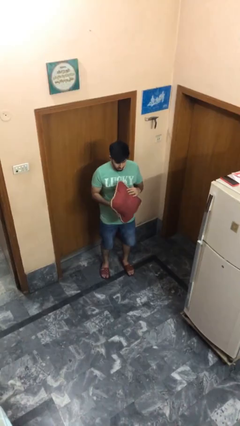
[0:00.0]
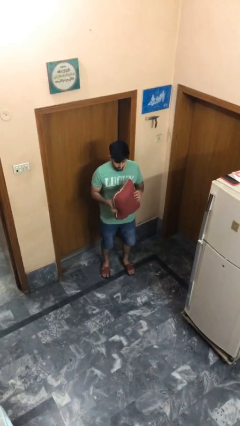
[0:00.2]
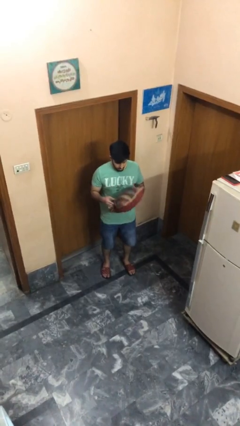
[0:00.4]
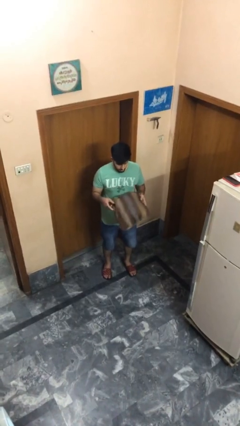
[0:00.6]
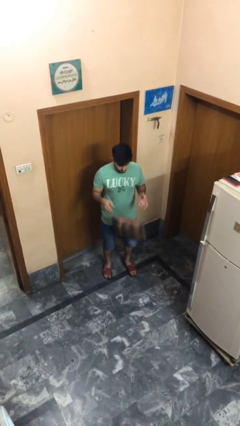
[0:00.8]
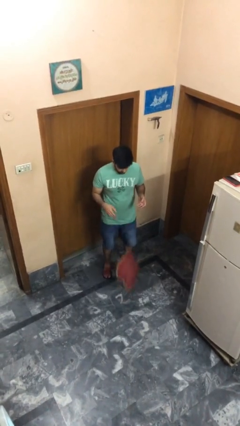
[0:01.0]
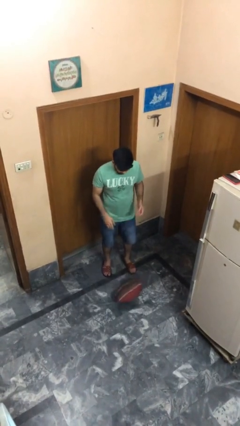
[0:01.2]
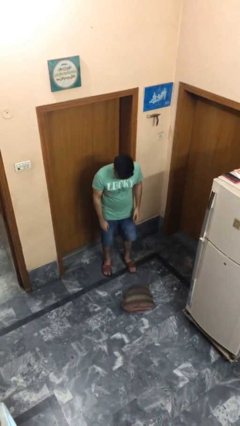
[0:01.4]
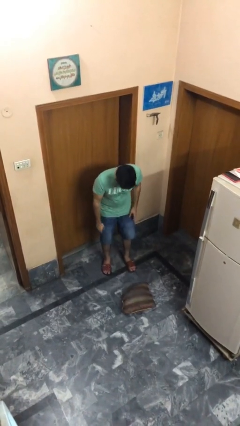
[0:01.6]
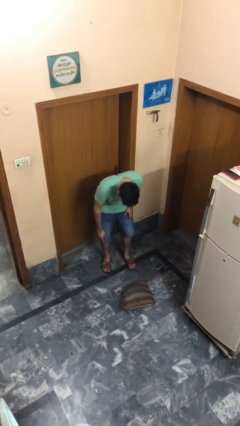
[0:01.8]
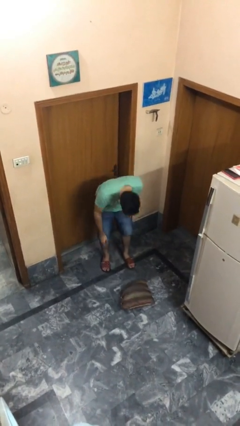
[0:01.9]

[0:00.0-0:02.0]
person drops object

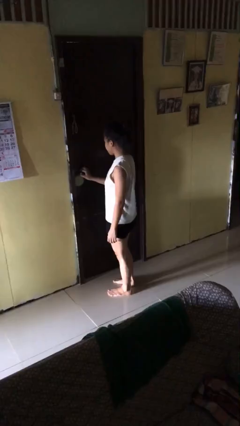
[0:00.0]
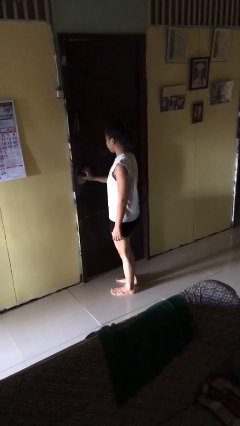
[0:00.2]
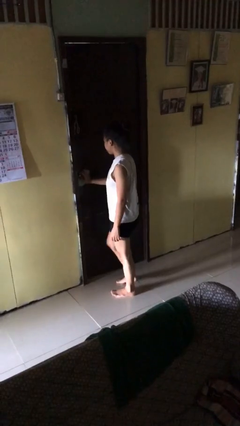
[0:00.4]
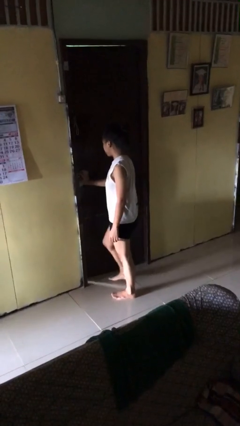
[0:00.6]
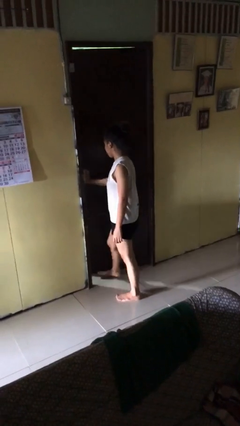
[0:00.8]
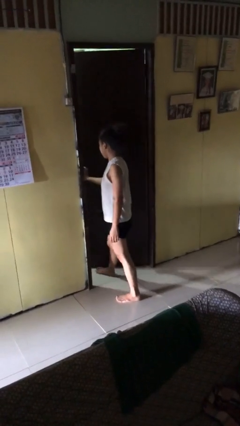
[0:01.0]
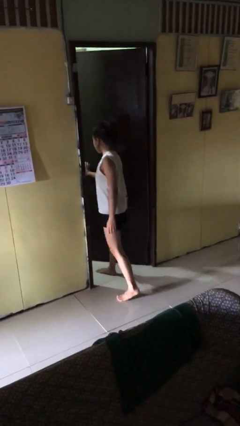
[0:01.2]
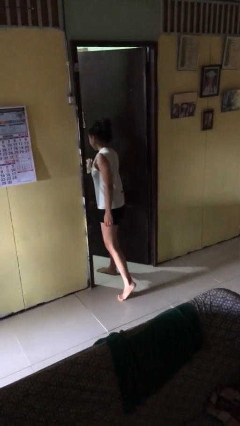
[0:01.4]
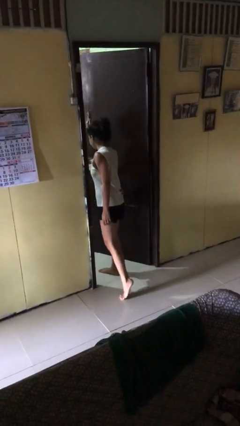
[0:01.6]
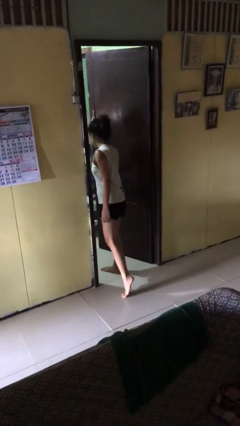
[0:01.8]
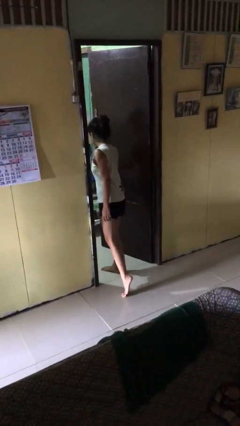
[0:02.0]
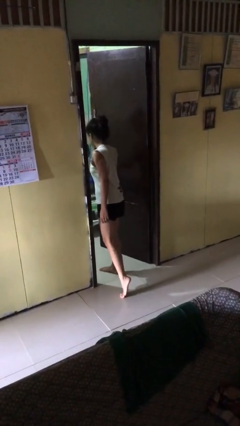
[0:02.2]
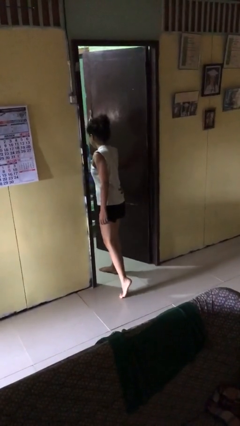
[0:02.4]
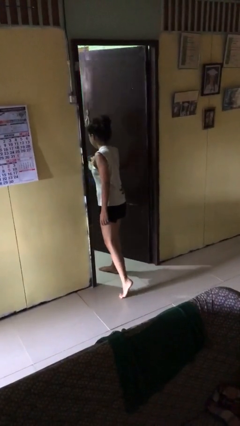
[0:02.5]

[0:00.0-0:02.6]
person opens facility door

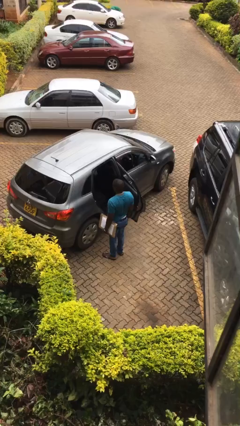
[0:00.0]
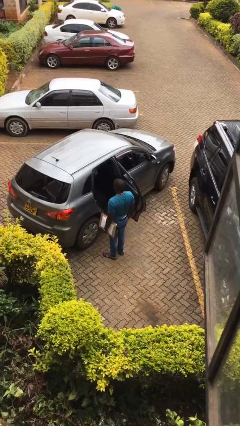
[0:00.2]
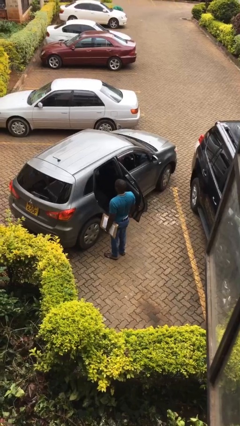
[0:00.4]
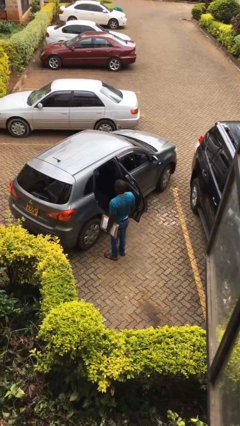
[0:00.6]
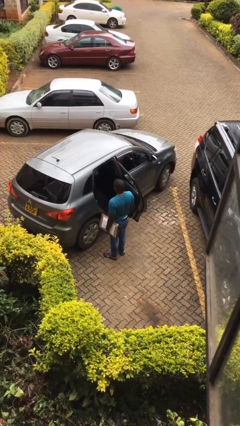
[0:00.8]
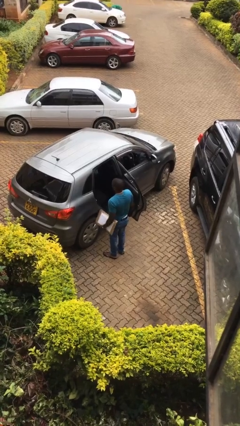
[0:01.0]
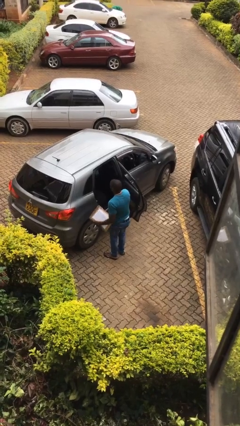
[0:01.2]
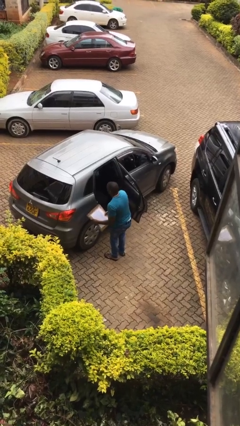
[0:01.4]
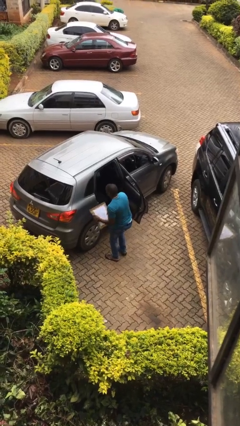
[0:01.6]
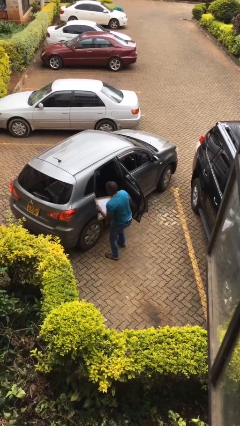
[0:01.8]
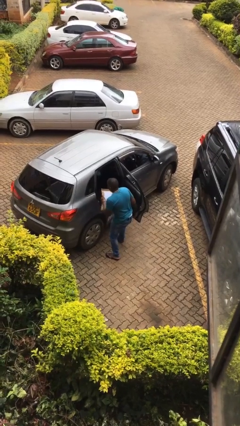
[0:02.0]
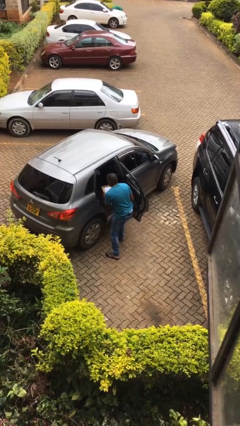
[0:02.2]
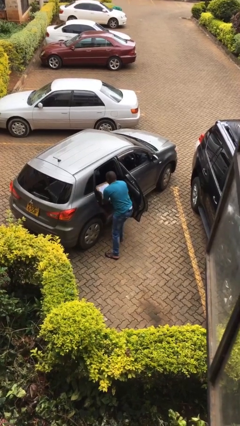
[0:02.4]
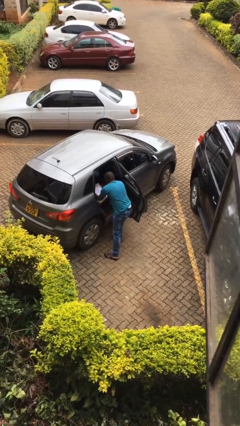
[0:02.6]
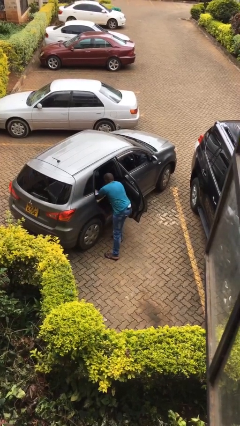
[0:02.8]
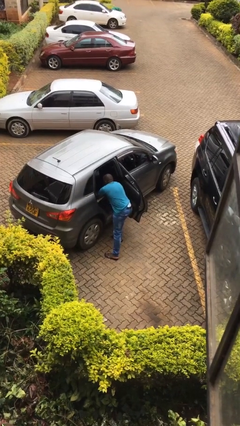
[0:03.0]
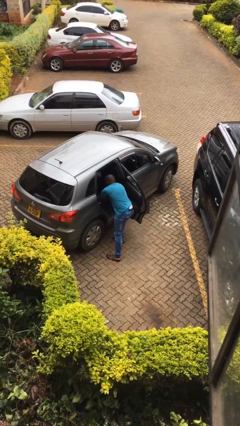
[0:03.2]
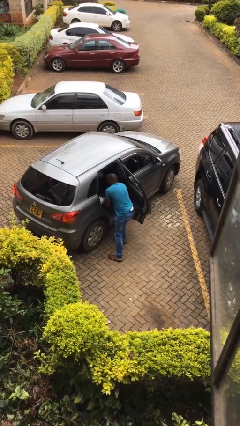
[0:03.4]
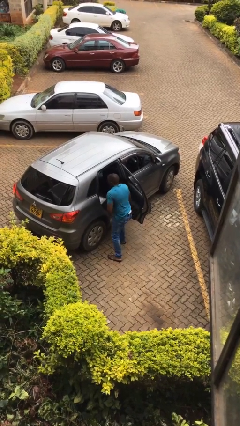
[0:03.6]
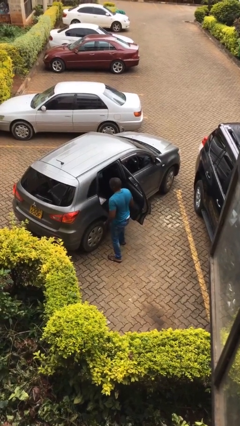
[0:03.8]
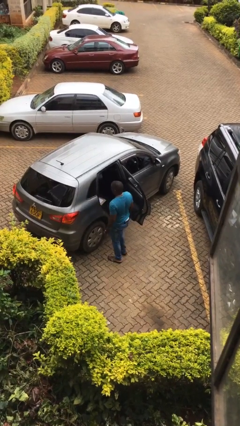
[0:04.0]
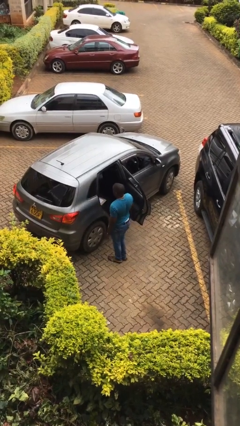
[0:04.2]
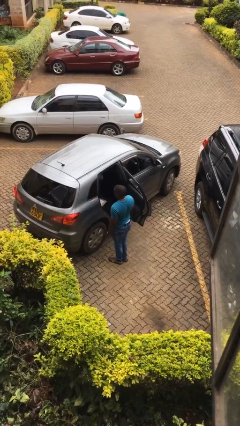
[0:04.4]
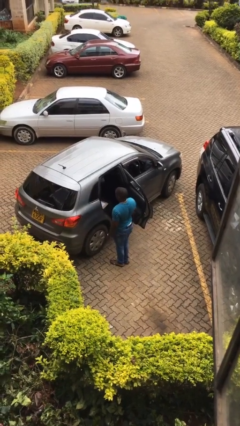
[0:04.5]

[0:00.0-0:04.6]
person loads car

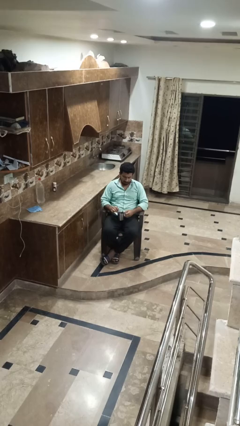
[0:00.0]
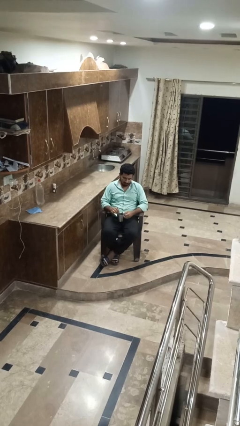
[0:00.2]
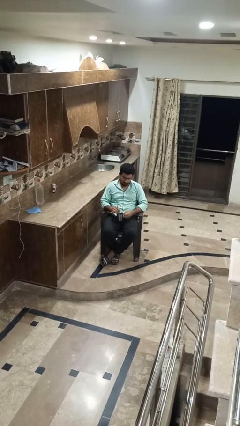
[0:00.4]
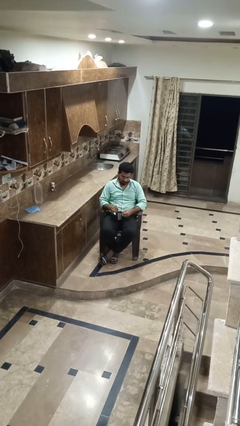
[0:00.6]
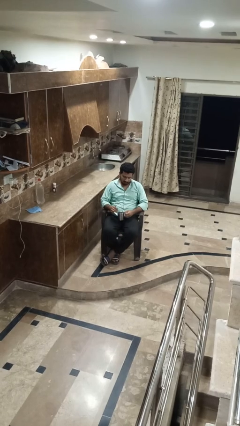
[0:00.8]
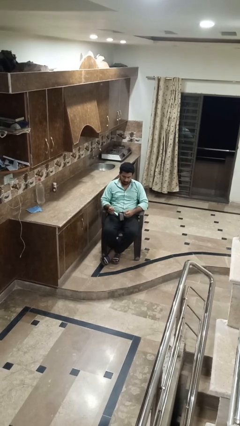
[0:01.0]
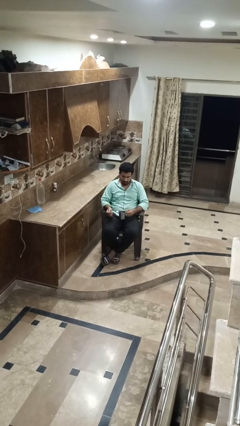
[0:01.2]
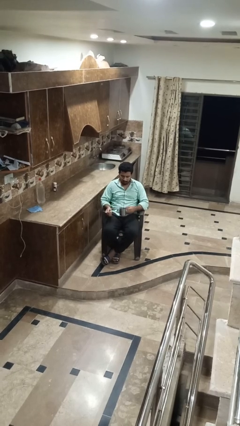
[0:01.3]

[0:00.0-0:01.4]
person stirs mug

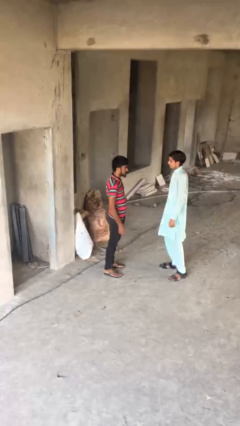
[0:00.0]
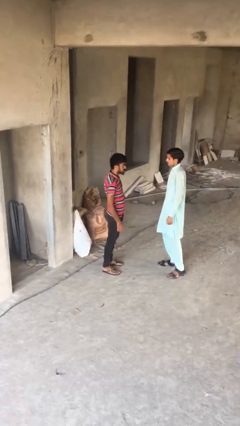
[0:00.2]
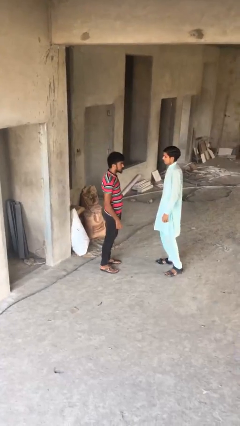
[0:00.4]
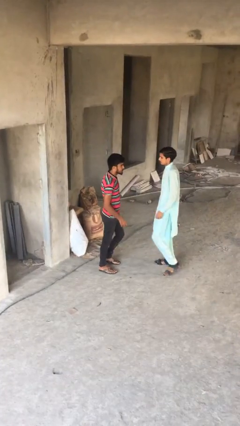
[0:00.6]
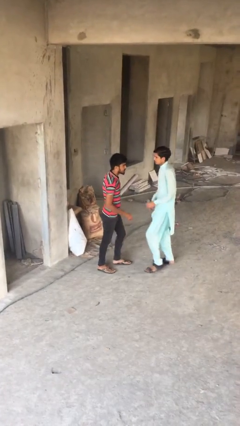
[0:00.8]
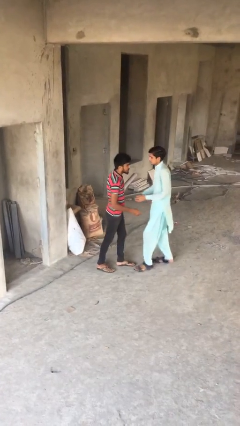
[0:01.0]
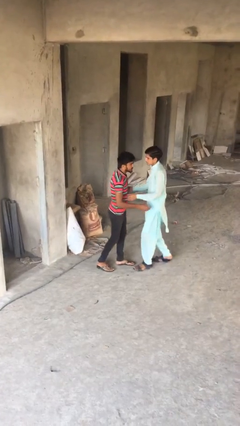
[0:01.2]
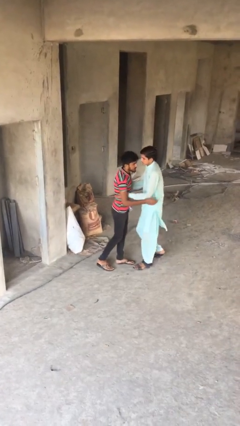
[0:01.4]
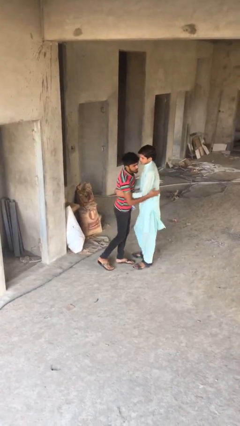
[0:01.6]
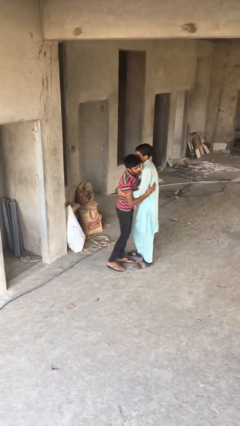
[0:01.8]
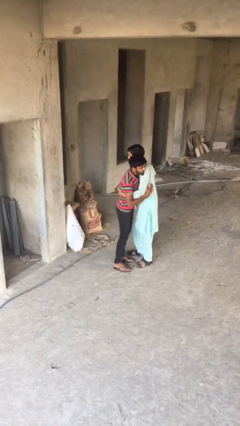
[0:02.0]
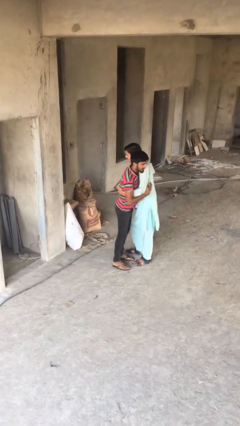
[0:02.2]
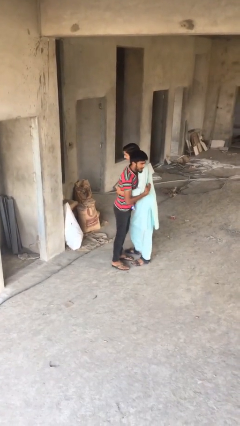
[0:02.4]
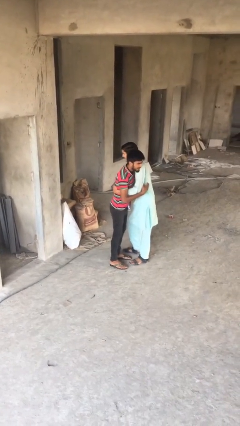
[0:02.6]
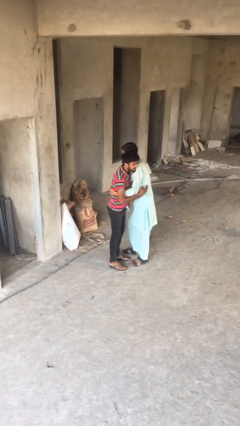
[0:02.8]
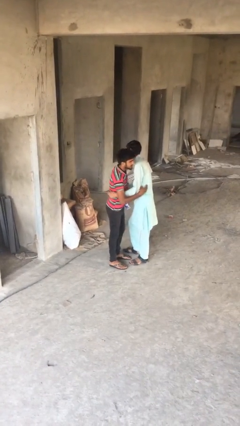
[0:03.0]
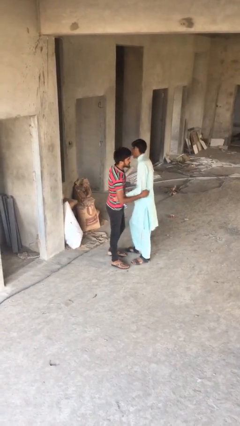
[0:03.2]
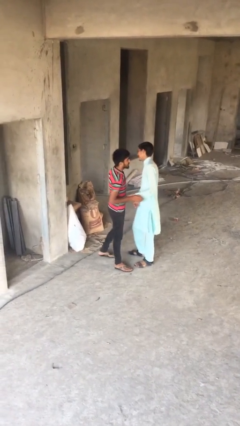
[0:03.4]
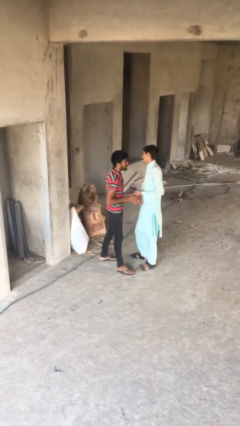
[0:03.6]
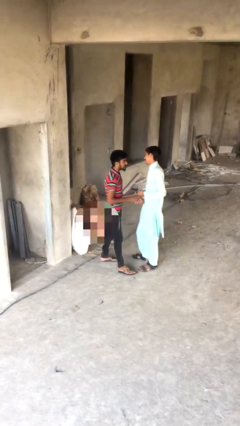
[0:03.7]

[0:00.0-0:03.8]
person embraces person

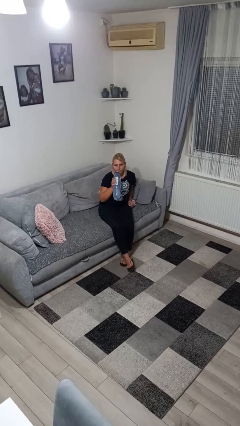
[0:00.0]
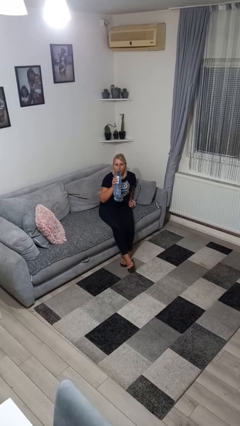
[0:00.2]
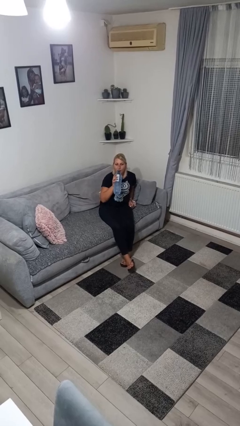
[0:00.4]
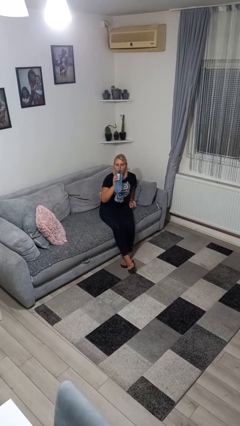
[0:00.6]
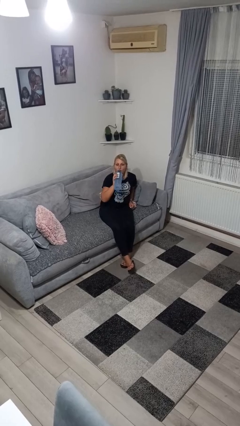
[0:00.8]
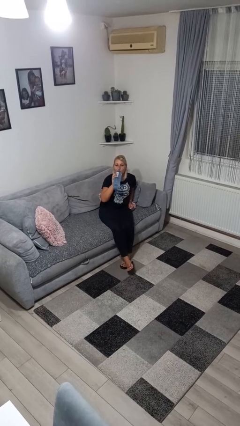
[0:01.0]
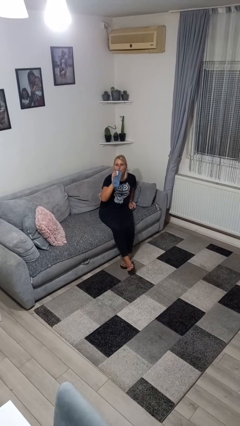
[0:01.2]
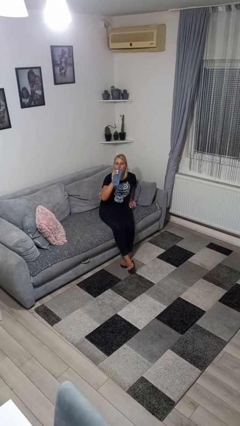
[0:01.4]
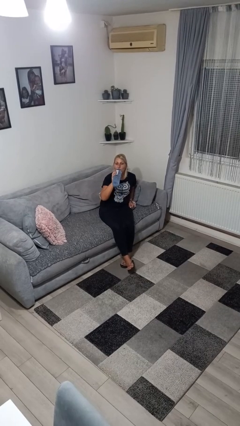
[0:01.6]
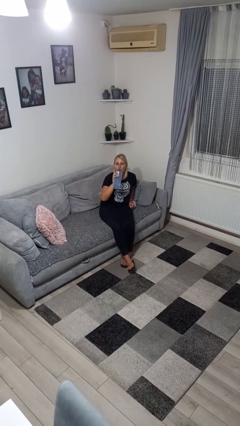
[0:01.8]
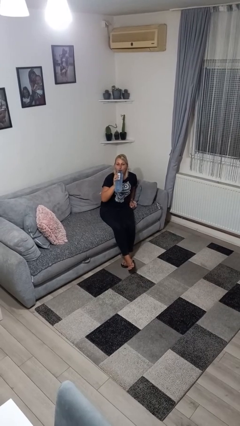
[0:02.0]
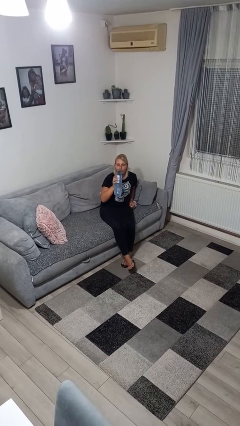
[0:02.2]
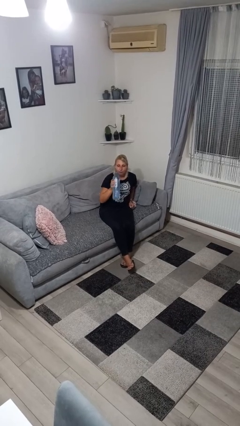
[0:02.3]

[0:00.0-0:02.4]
person drinks from bottle

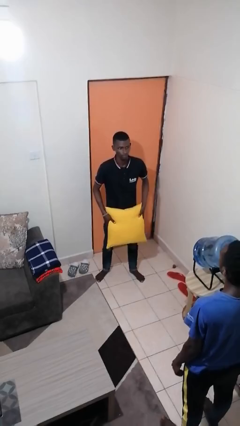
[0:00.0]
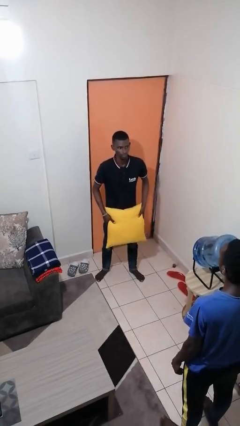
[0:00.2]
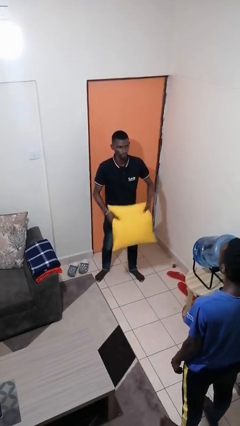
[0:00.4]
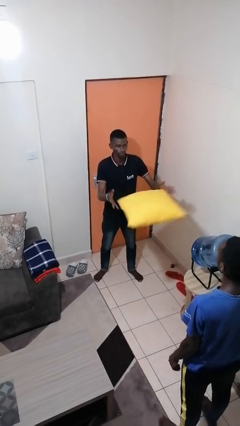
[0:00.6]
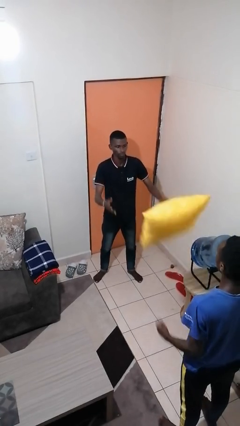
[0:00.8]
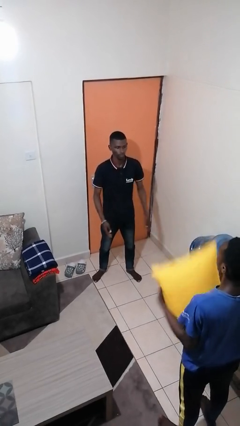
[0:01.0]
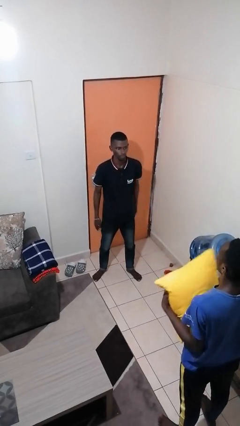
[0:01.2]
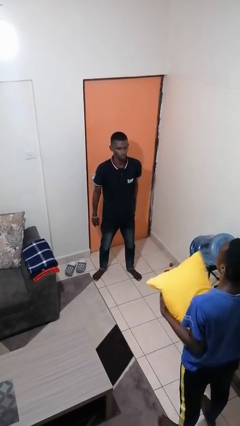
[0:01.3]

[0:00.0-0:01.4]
person throws object to person
